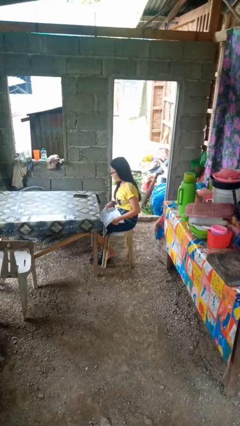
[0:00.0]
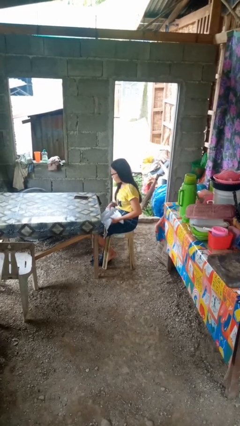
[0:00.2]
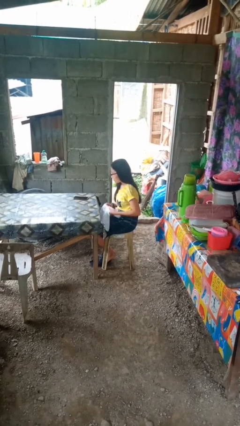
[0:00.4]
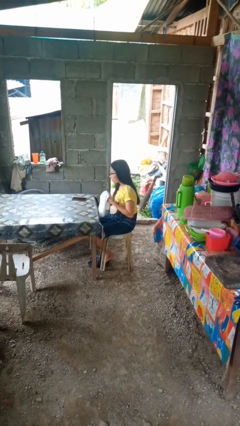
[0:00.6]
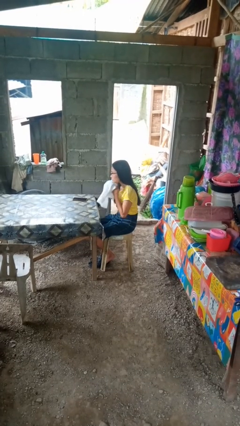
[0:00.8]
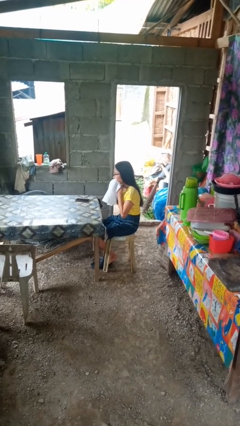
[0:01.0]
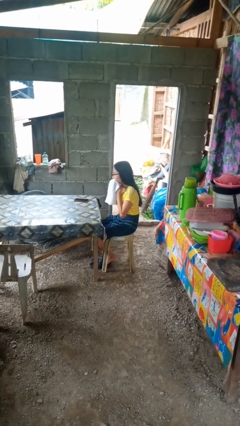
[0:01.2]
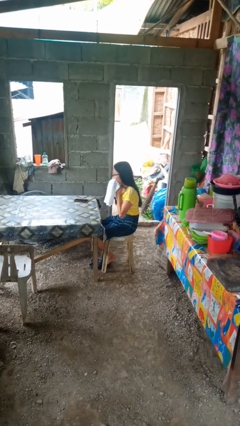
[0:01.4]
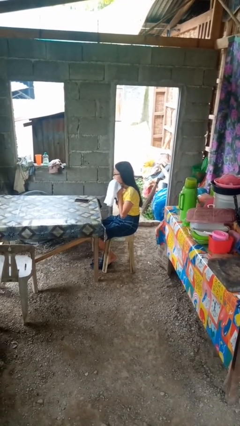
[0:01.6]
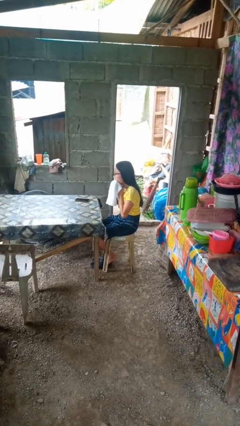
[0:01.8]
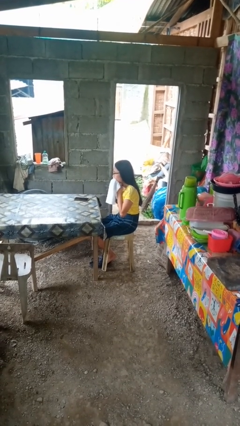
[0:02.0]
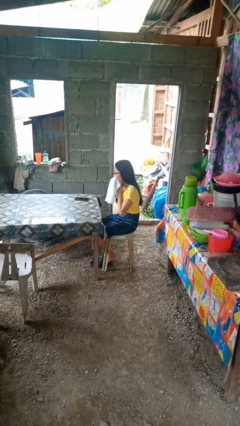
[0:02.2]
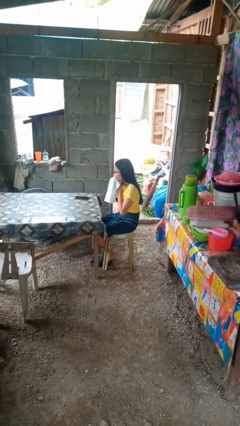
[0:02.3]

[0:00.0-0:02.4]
person wipes mouth with napkin

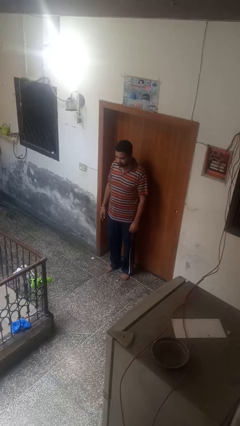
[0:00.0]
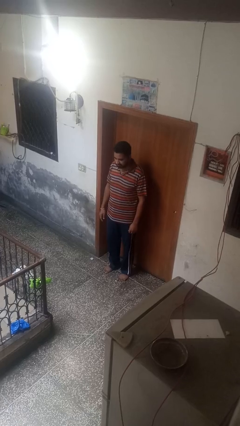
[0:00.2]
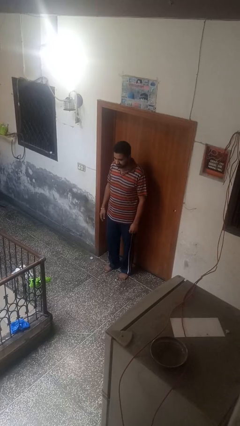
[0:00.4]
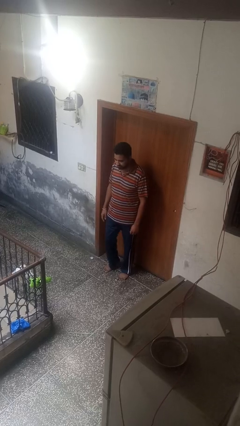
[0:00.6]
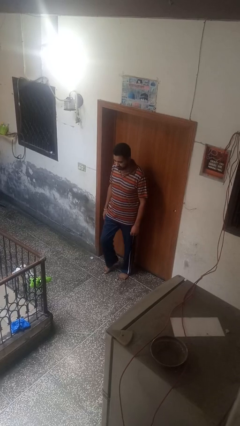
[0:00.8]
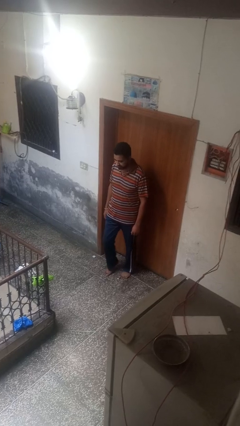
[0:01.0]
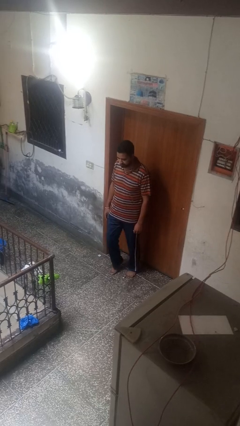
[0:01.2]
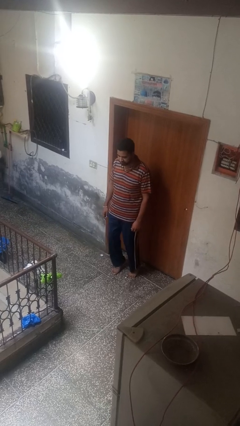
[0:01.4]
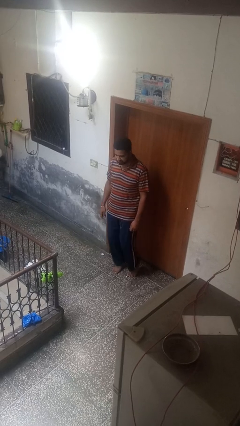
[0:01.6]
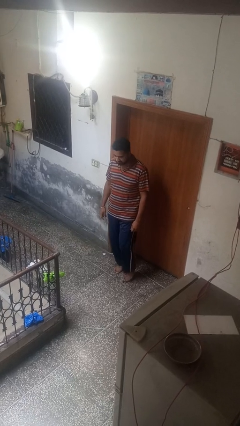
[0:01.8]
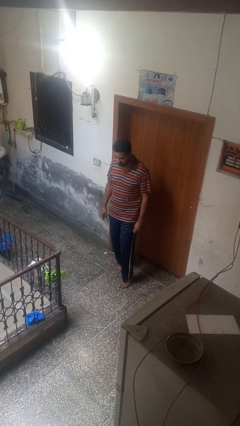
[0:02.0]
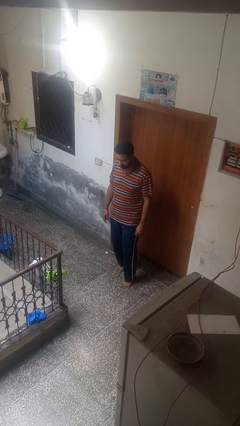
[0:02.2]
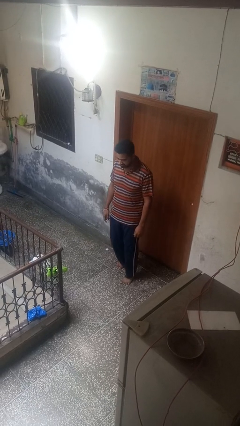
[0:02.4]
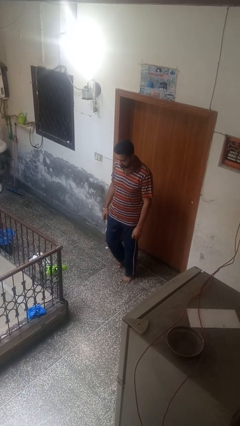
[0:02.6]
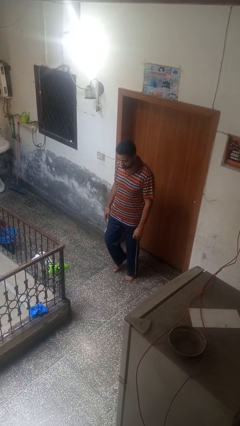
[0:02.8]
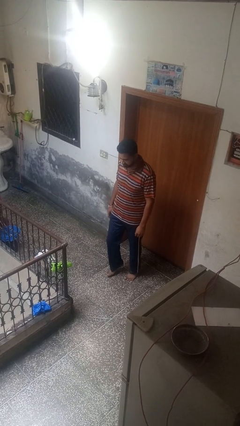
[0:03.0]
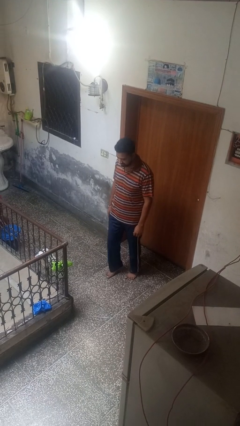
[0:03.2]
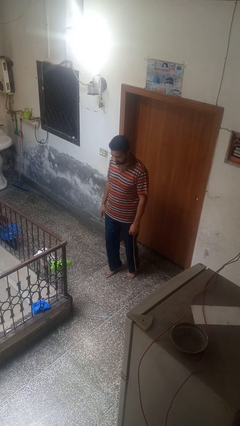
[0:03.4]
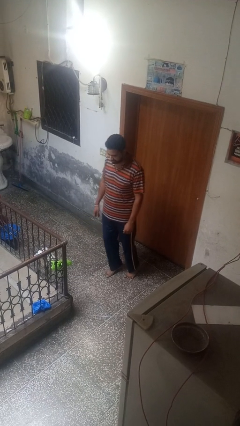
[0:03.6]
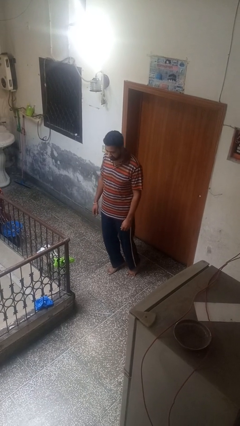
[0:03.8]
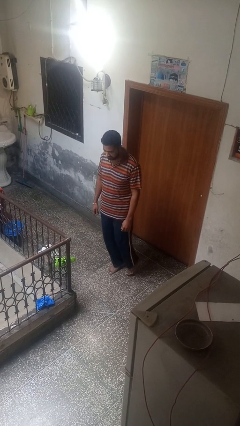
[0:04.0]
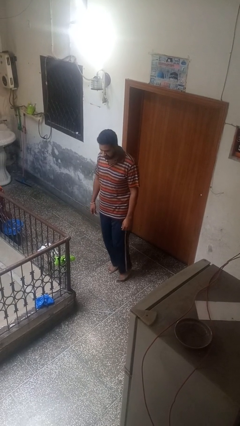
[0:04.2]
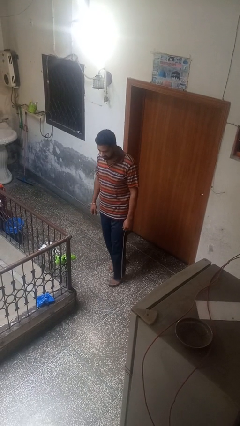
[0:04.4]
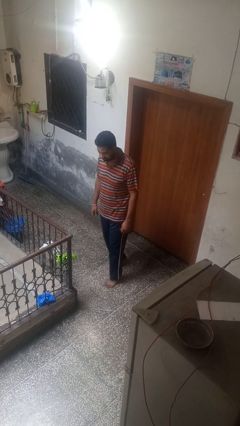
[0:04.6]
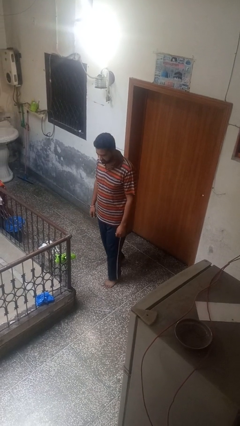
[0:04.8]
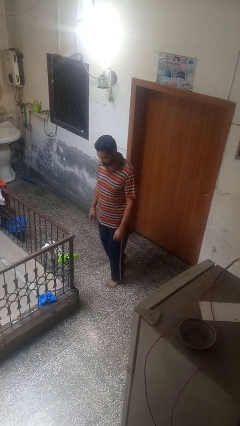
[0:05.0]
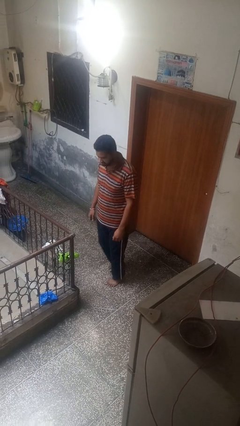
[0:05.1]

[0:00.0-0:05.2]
person walks tiptoe

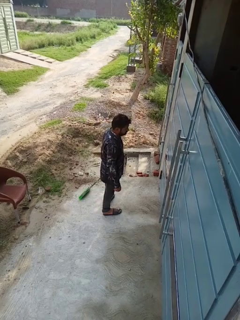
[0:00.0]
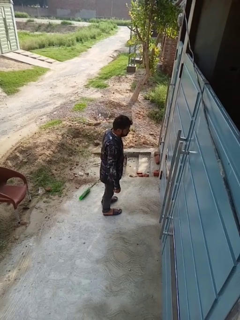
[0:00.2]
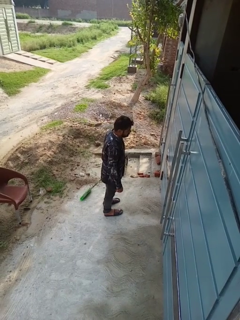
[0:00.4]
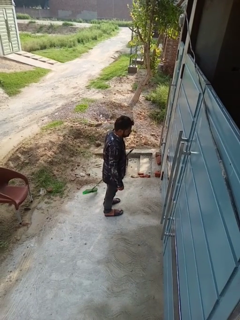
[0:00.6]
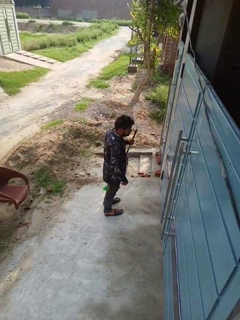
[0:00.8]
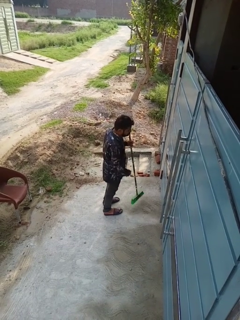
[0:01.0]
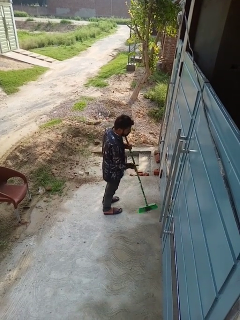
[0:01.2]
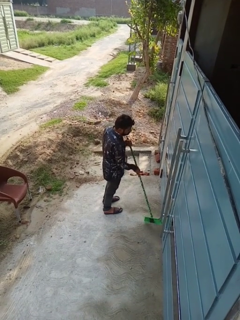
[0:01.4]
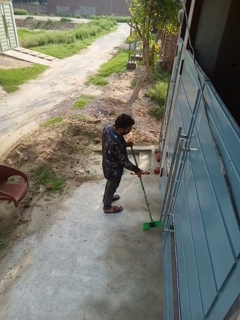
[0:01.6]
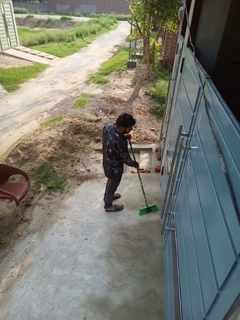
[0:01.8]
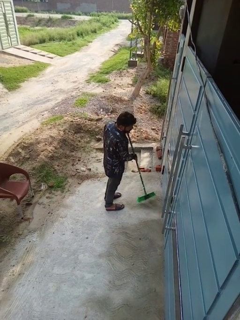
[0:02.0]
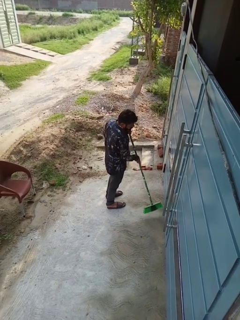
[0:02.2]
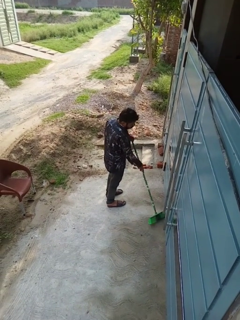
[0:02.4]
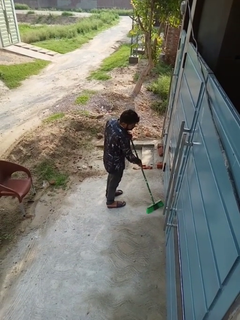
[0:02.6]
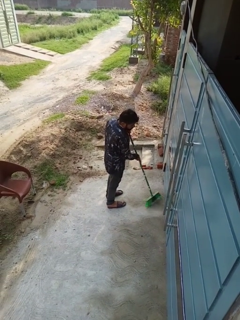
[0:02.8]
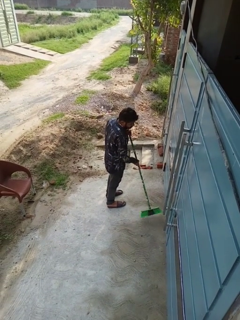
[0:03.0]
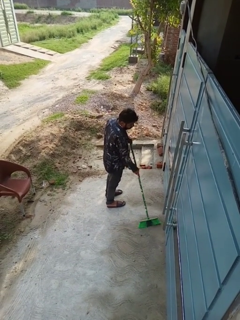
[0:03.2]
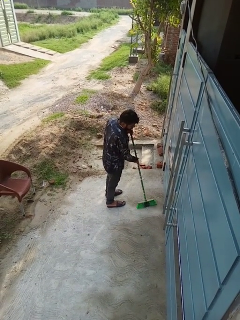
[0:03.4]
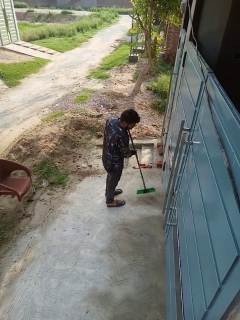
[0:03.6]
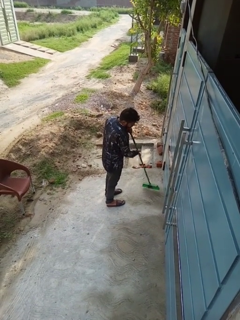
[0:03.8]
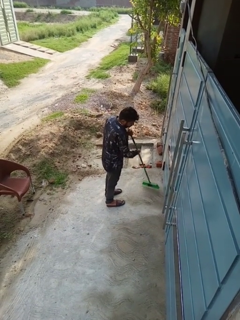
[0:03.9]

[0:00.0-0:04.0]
person sweeps floor

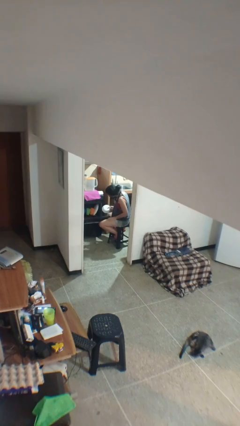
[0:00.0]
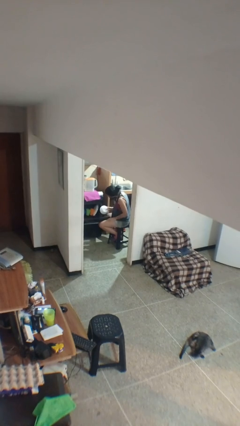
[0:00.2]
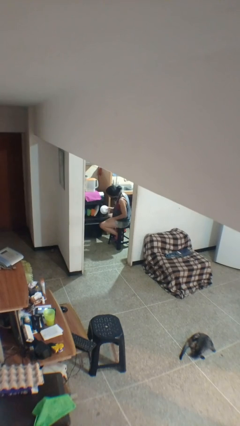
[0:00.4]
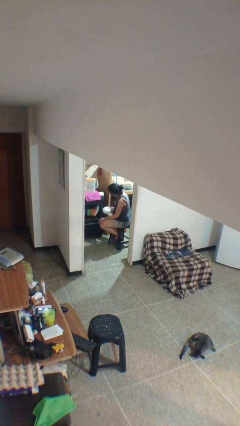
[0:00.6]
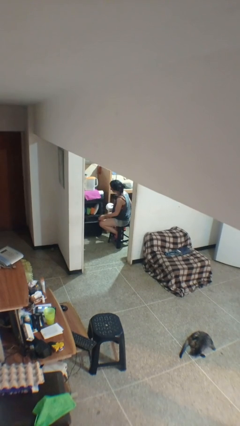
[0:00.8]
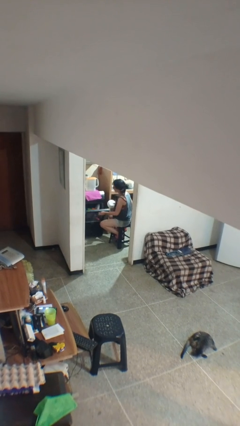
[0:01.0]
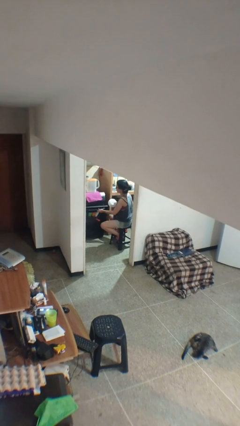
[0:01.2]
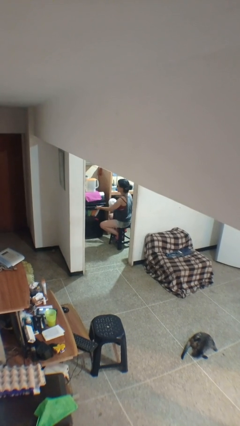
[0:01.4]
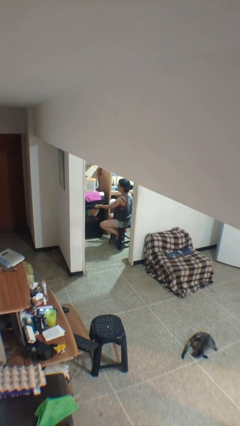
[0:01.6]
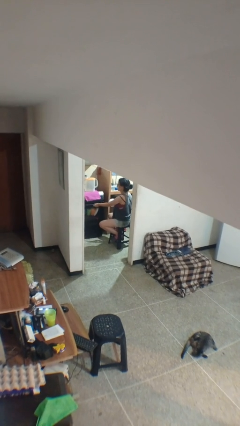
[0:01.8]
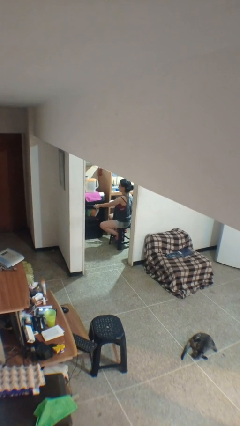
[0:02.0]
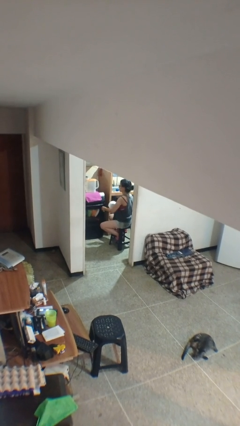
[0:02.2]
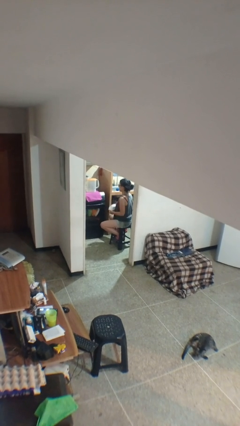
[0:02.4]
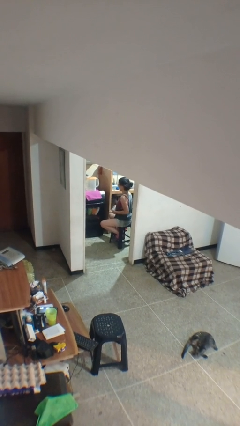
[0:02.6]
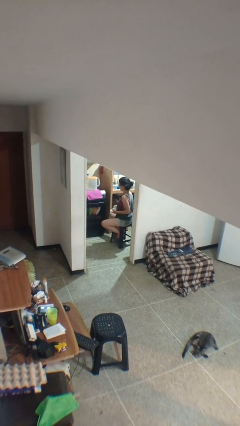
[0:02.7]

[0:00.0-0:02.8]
person closes dishwasher

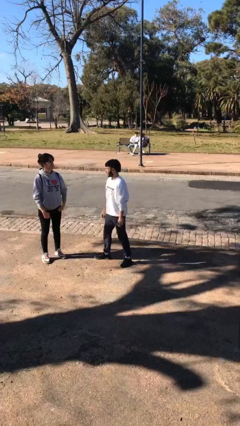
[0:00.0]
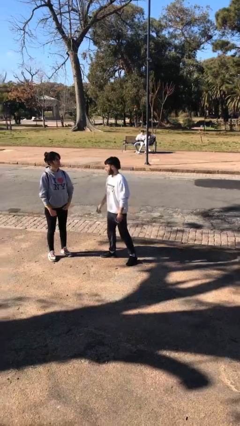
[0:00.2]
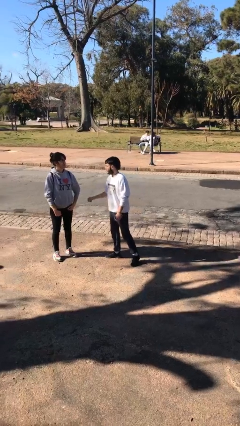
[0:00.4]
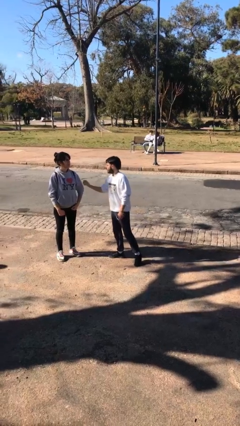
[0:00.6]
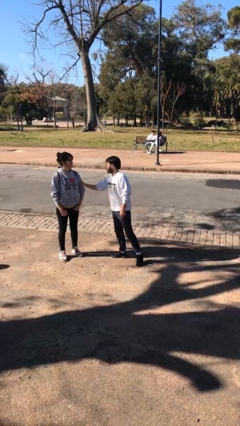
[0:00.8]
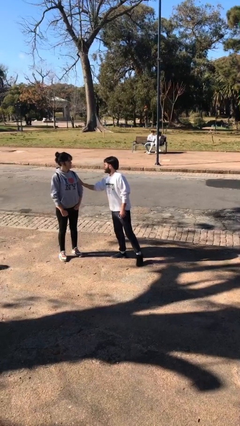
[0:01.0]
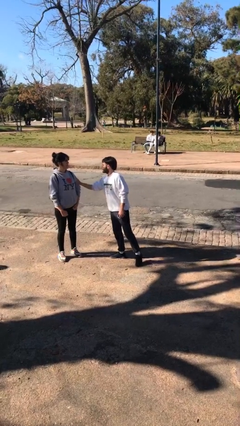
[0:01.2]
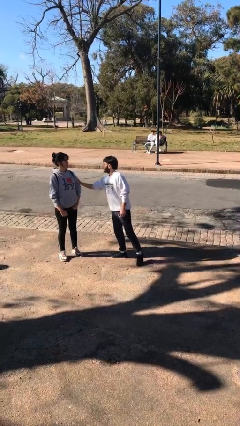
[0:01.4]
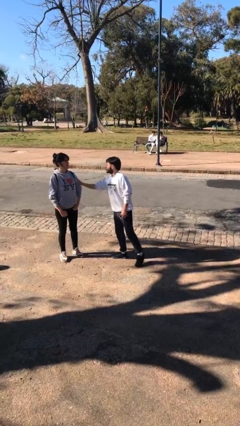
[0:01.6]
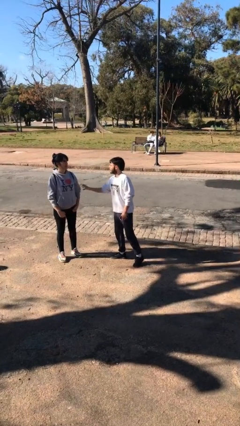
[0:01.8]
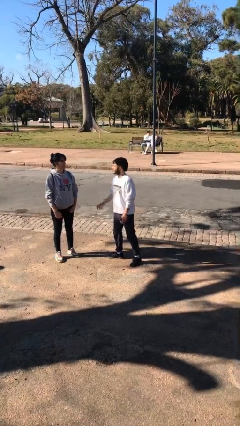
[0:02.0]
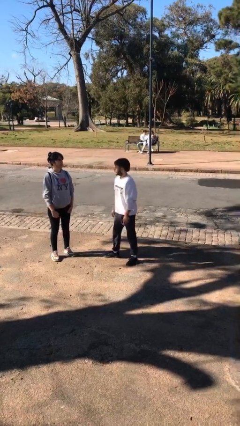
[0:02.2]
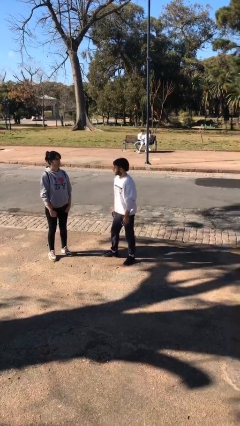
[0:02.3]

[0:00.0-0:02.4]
person grabs person by bicep

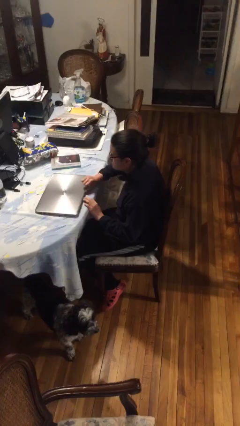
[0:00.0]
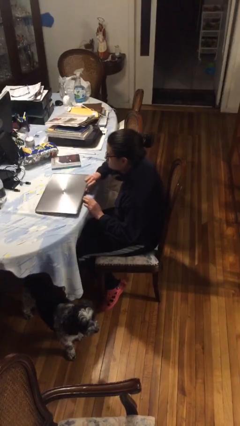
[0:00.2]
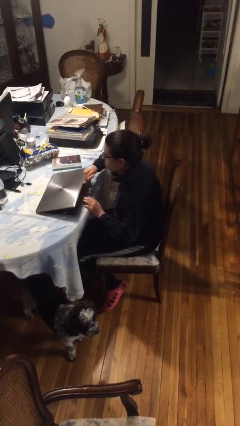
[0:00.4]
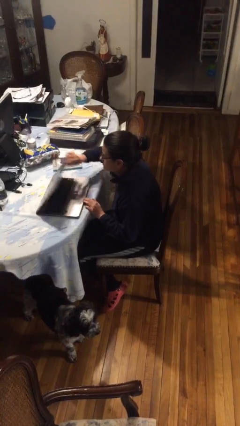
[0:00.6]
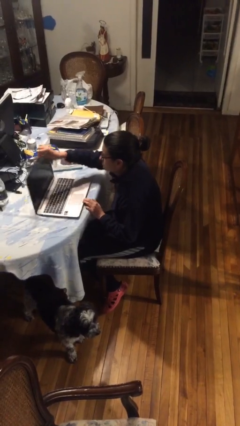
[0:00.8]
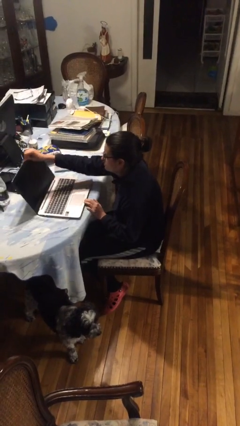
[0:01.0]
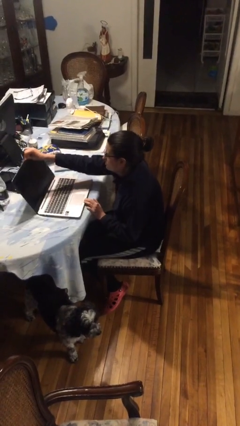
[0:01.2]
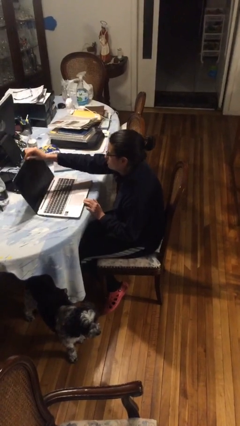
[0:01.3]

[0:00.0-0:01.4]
person opens laptop
